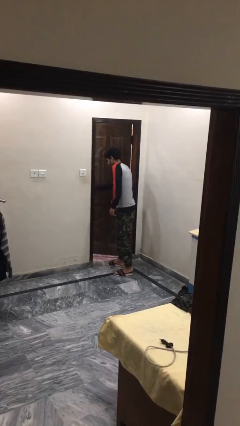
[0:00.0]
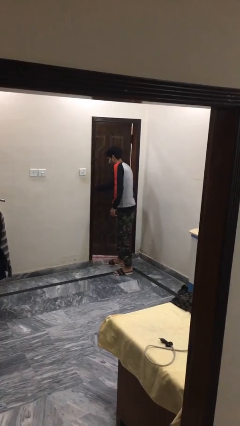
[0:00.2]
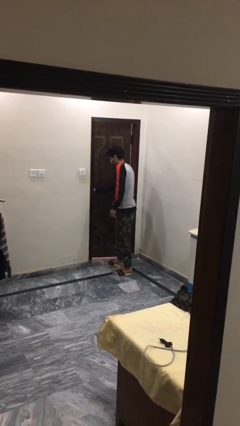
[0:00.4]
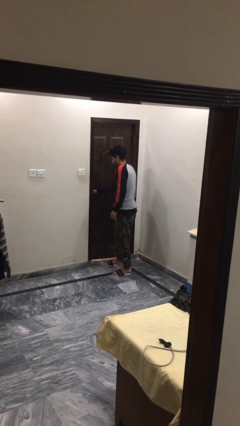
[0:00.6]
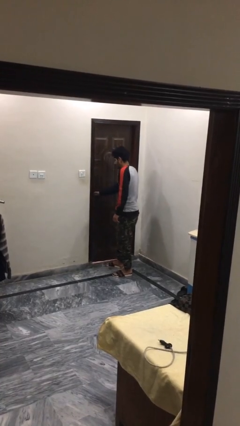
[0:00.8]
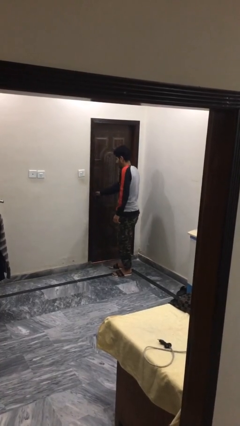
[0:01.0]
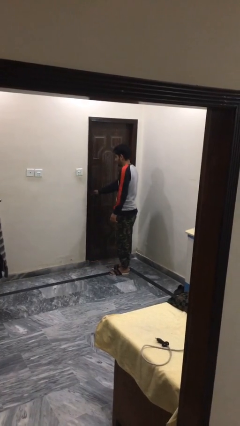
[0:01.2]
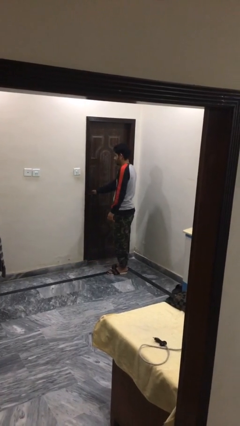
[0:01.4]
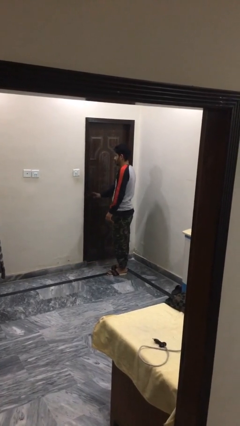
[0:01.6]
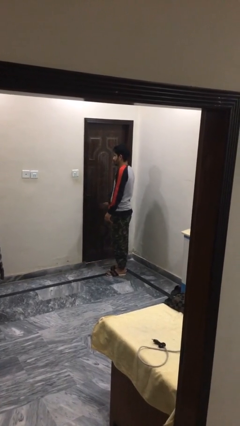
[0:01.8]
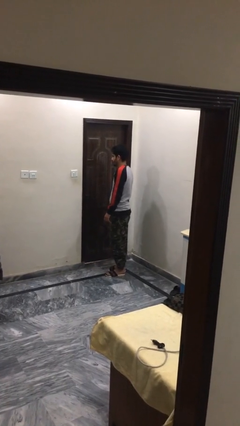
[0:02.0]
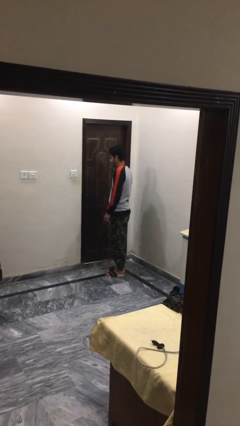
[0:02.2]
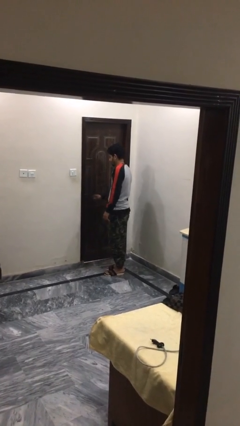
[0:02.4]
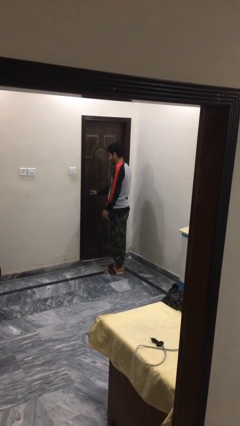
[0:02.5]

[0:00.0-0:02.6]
person closes facility door

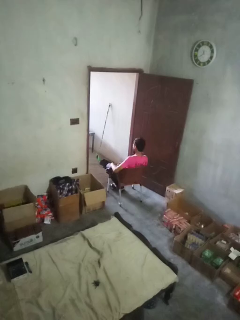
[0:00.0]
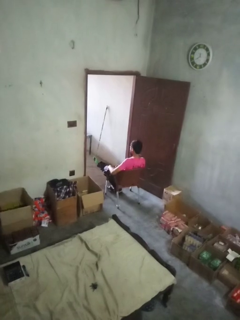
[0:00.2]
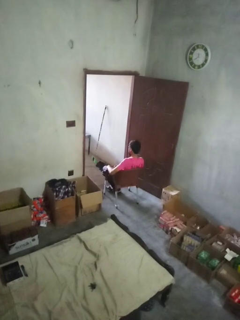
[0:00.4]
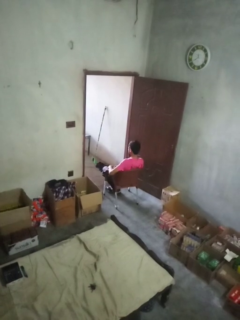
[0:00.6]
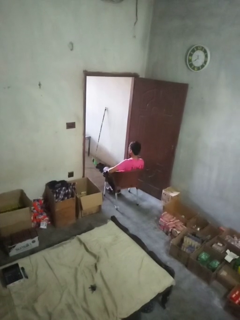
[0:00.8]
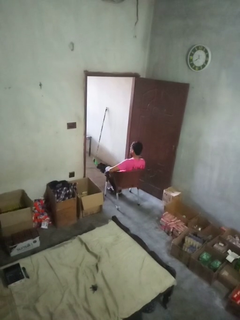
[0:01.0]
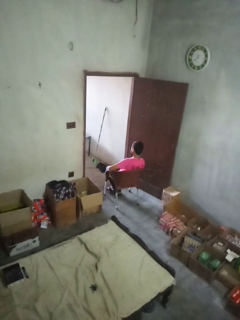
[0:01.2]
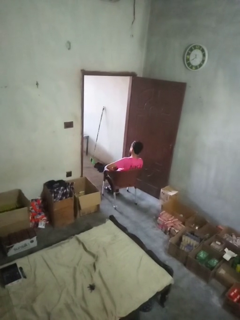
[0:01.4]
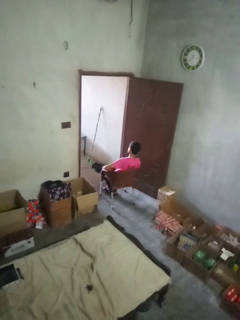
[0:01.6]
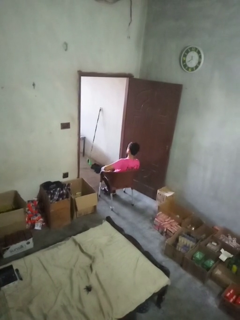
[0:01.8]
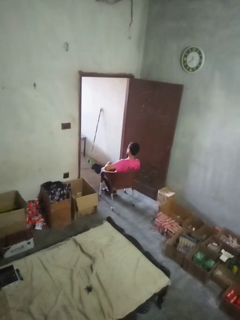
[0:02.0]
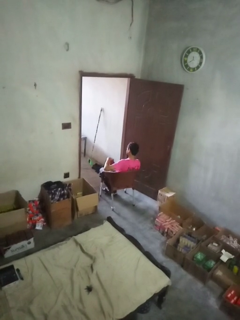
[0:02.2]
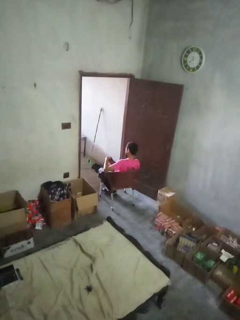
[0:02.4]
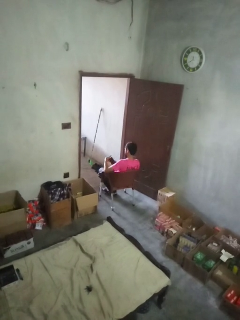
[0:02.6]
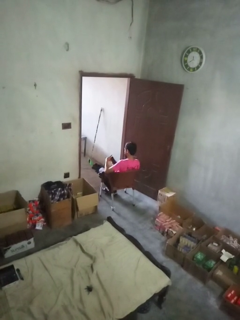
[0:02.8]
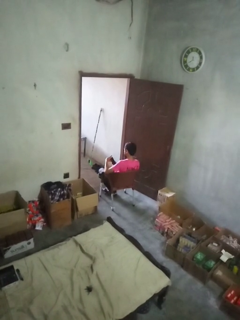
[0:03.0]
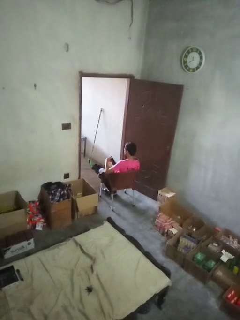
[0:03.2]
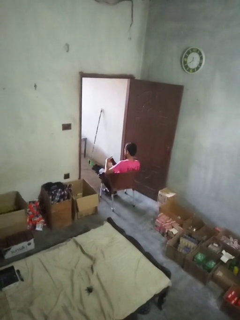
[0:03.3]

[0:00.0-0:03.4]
person takes phone from pocket

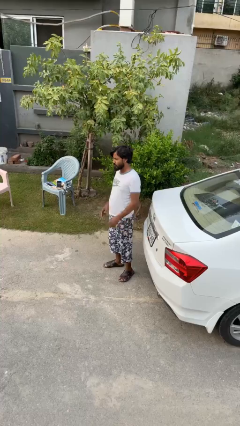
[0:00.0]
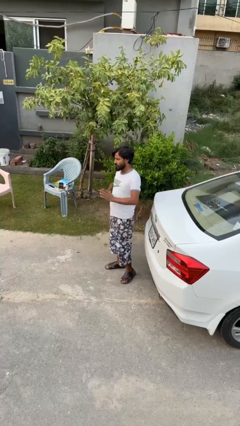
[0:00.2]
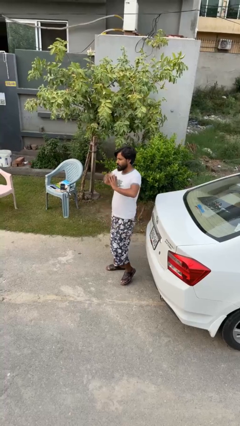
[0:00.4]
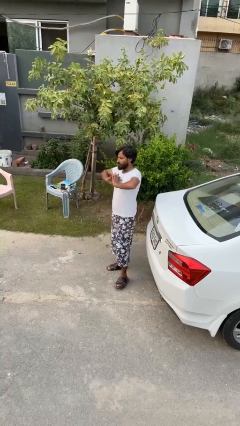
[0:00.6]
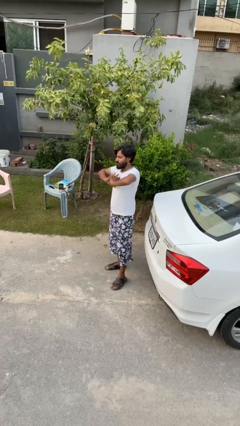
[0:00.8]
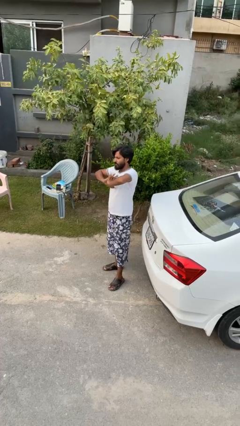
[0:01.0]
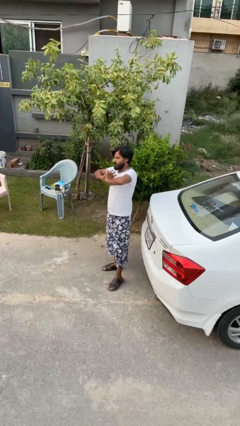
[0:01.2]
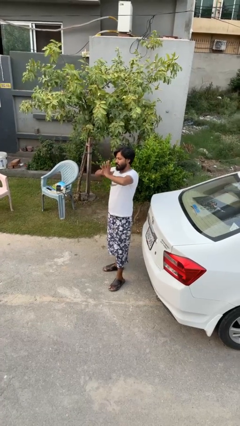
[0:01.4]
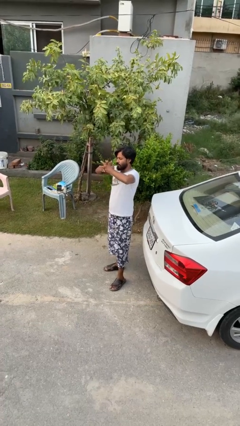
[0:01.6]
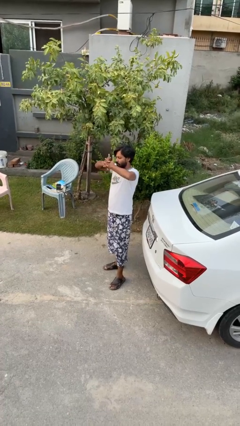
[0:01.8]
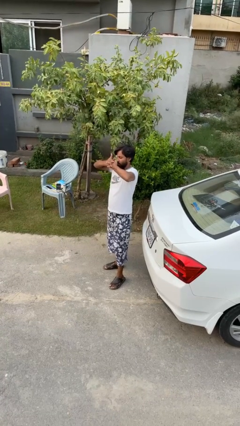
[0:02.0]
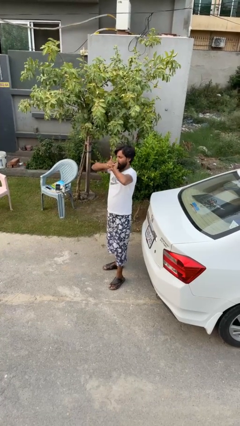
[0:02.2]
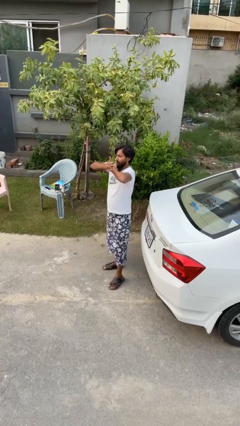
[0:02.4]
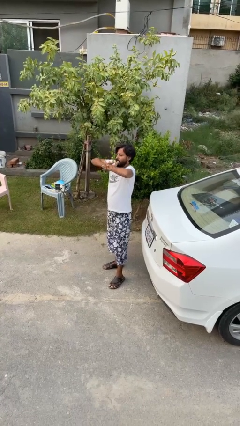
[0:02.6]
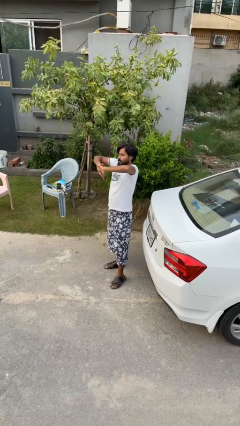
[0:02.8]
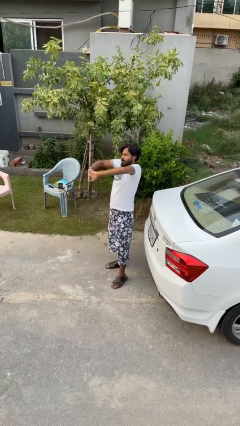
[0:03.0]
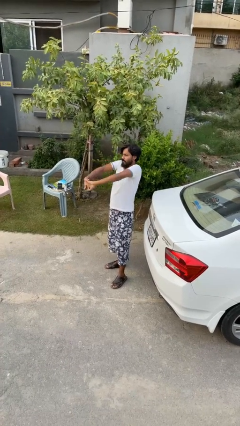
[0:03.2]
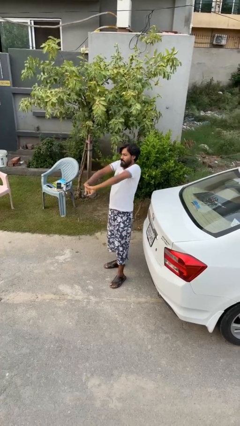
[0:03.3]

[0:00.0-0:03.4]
person cracks knuckles

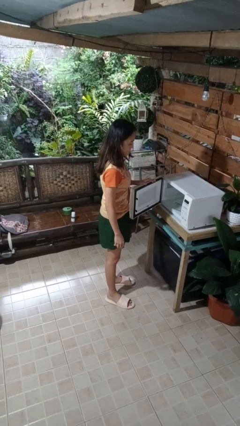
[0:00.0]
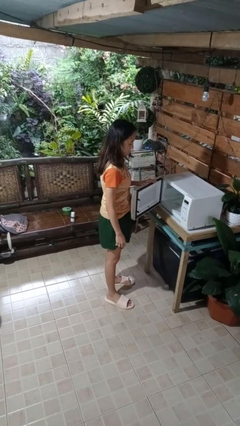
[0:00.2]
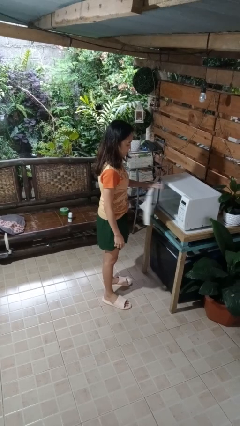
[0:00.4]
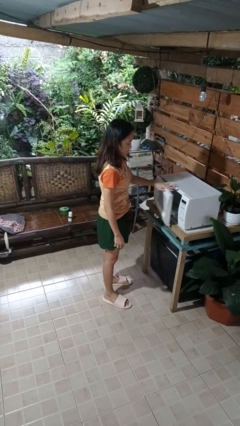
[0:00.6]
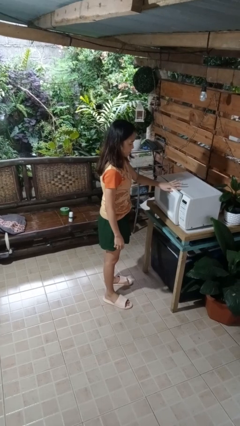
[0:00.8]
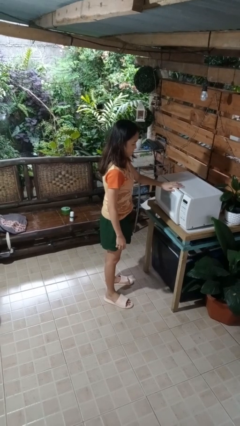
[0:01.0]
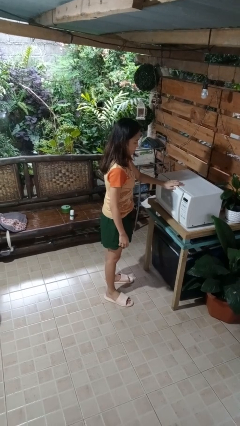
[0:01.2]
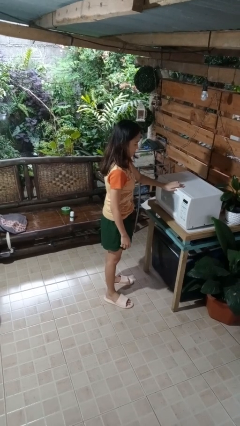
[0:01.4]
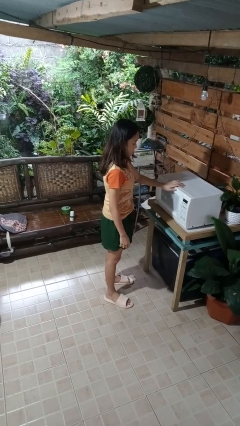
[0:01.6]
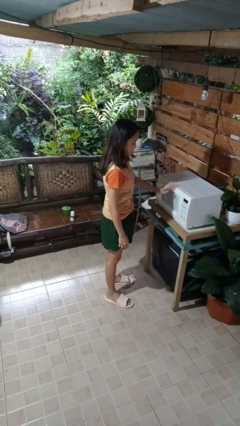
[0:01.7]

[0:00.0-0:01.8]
person closes microwave

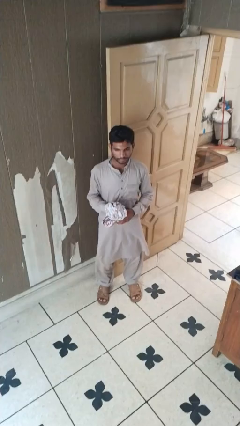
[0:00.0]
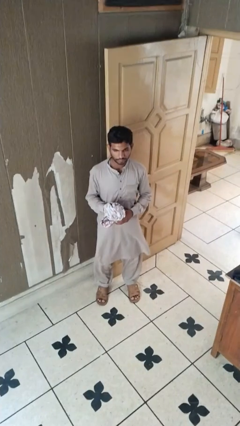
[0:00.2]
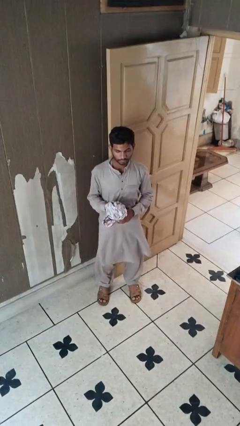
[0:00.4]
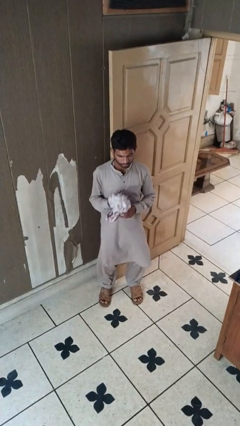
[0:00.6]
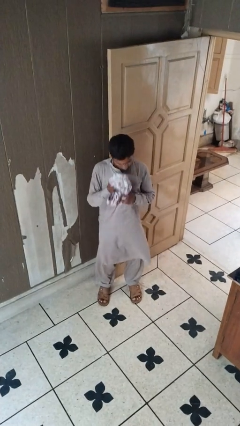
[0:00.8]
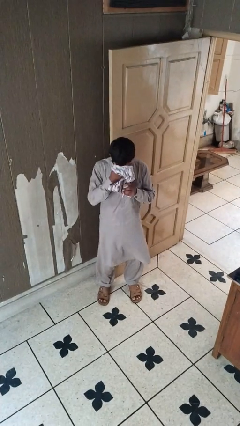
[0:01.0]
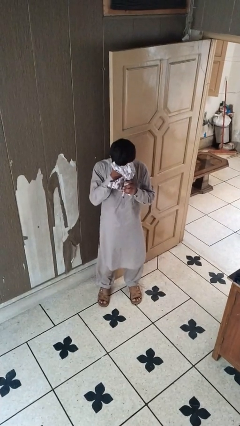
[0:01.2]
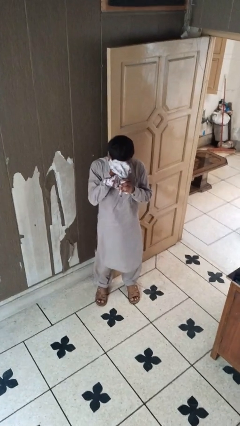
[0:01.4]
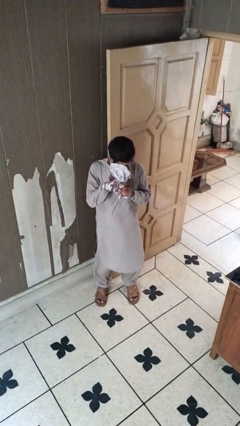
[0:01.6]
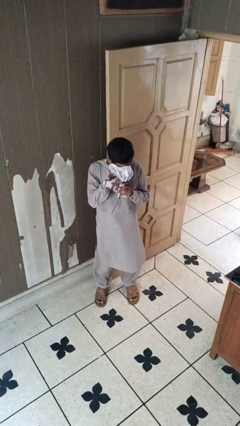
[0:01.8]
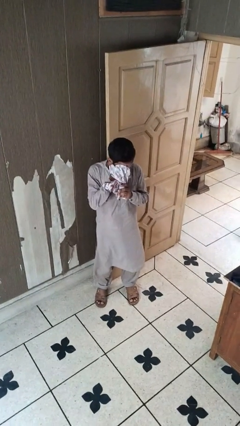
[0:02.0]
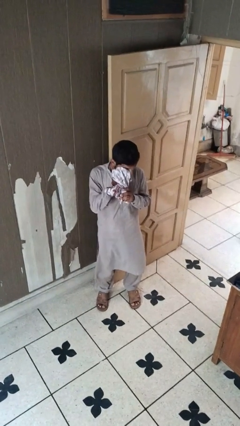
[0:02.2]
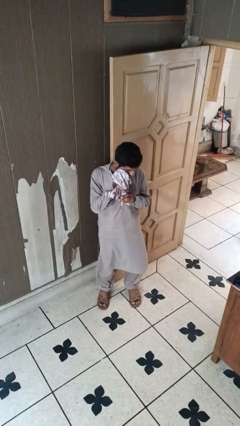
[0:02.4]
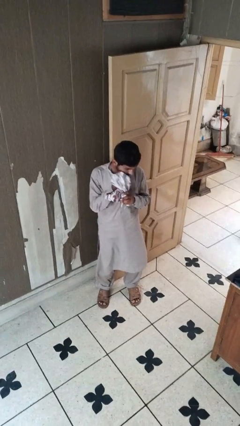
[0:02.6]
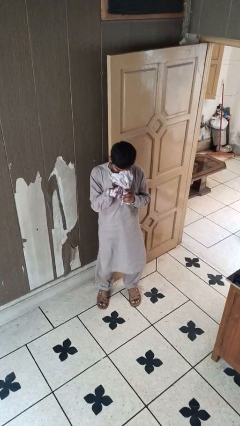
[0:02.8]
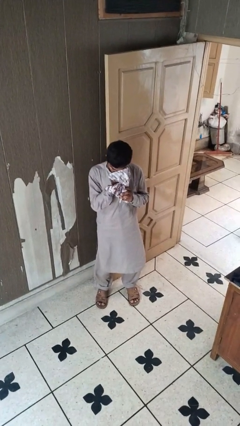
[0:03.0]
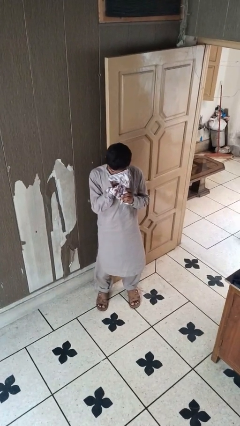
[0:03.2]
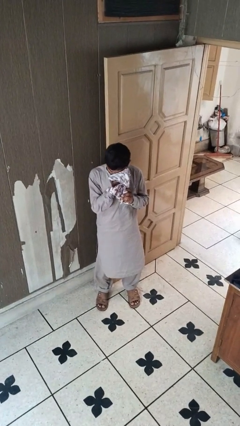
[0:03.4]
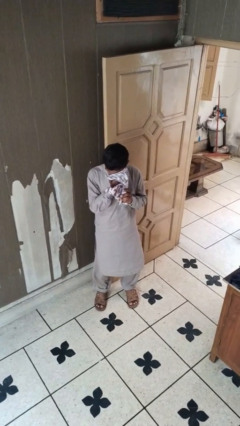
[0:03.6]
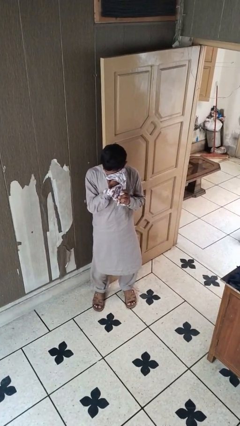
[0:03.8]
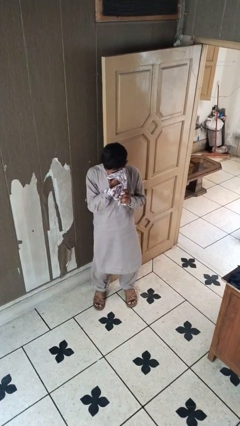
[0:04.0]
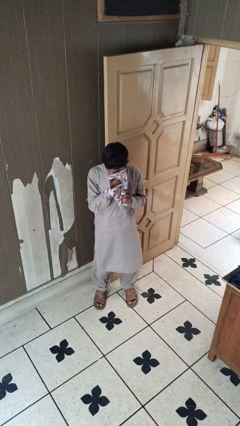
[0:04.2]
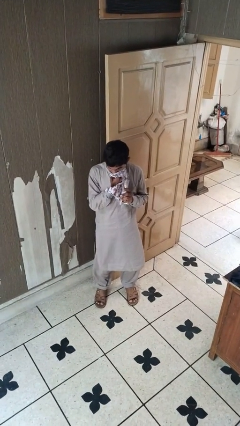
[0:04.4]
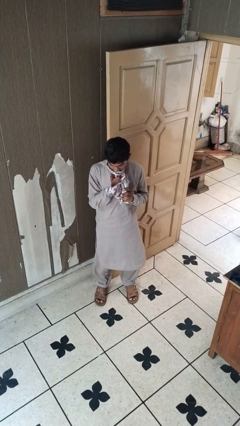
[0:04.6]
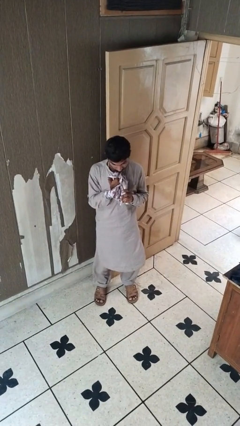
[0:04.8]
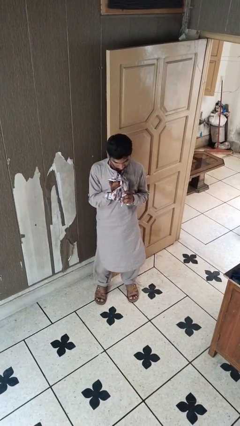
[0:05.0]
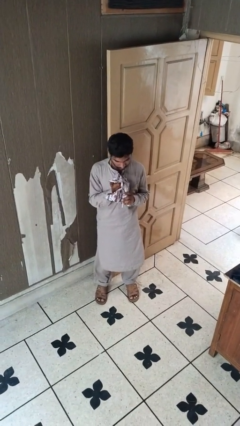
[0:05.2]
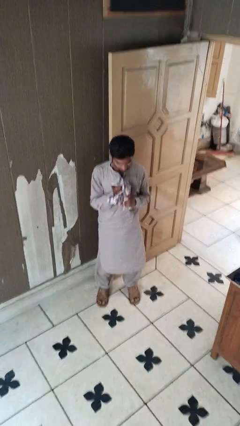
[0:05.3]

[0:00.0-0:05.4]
person wipes mouth with napkin

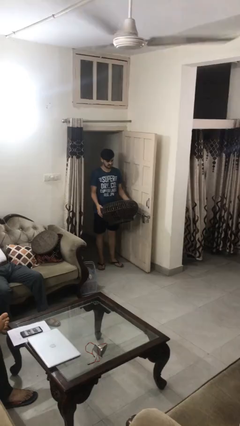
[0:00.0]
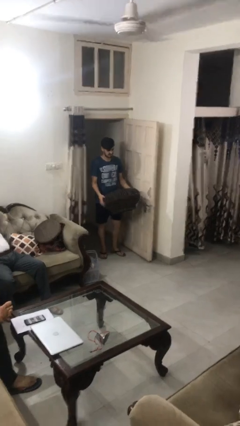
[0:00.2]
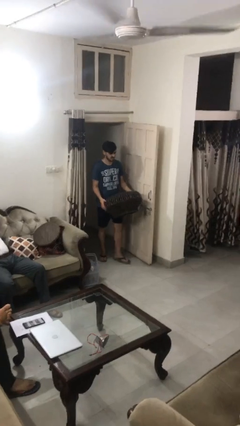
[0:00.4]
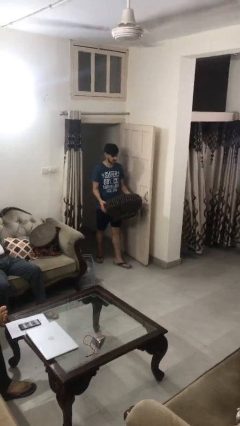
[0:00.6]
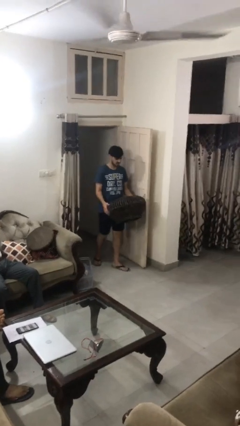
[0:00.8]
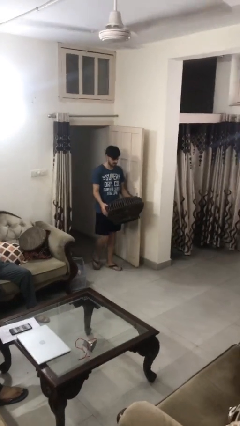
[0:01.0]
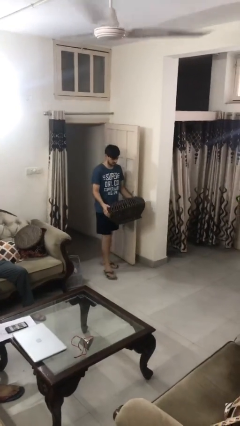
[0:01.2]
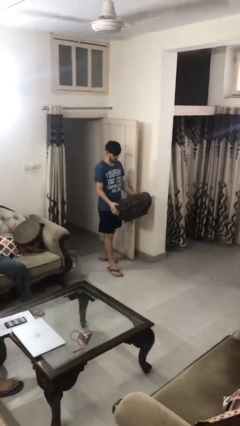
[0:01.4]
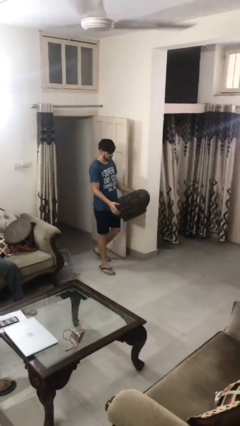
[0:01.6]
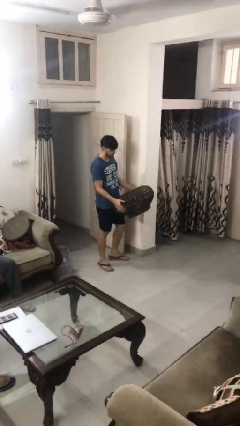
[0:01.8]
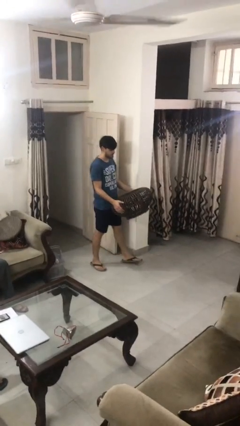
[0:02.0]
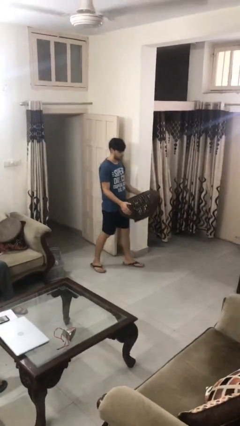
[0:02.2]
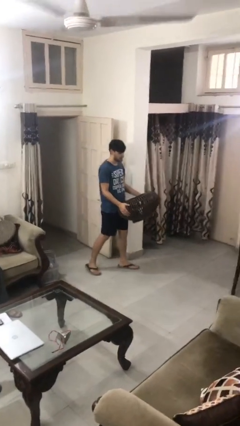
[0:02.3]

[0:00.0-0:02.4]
person carries furniture
